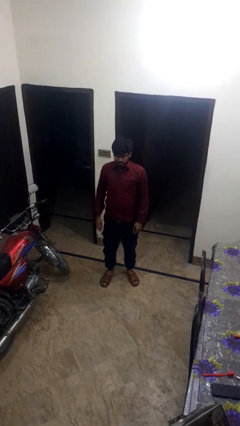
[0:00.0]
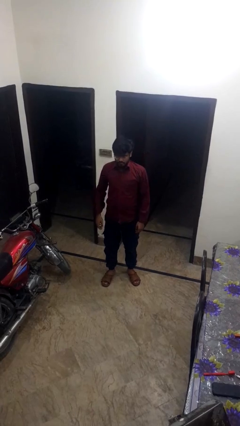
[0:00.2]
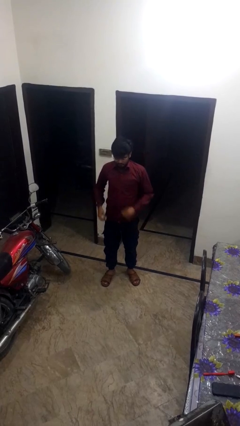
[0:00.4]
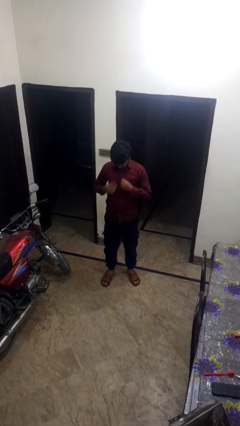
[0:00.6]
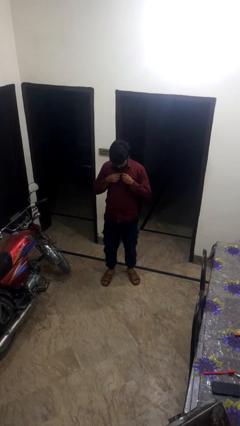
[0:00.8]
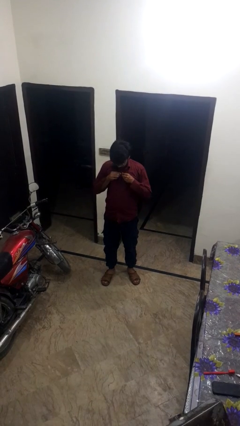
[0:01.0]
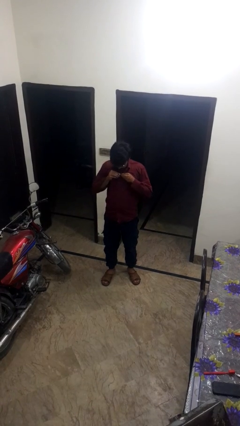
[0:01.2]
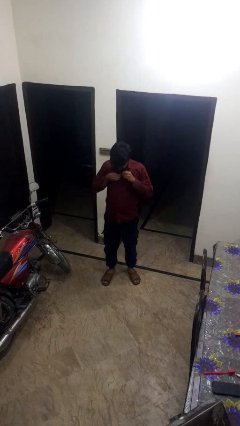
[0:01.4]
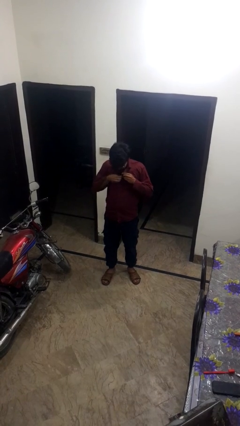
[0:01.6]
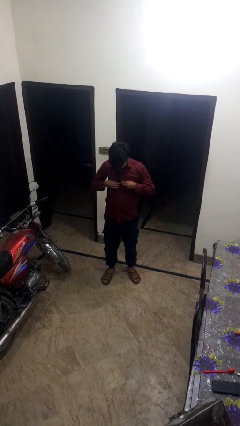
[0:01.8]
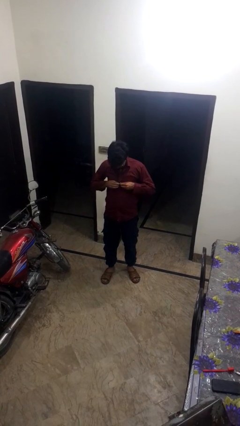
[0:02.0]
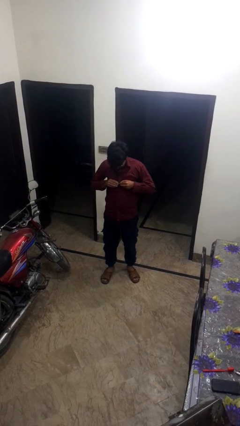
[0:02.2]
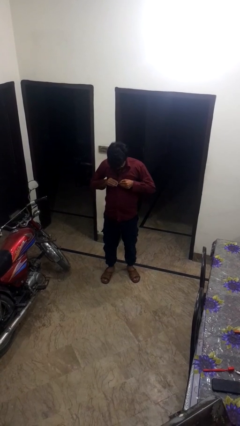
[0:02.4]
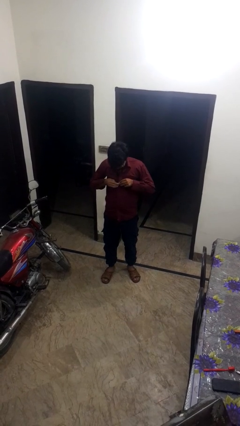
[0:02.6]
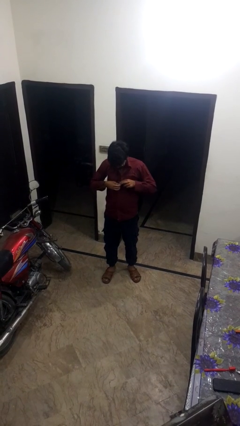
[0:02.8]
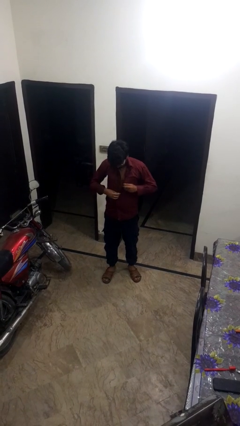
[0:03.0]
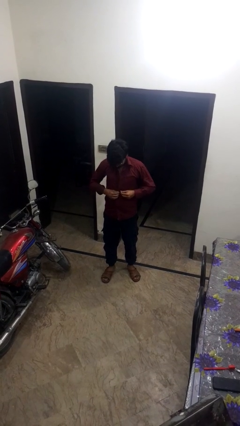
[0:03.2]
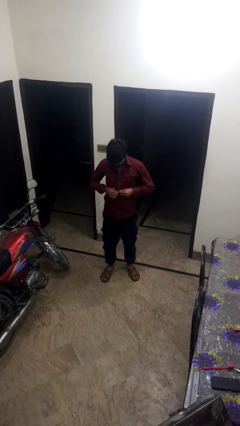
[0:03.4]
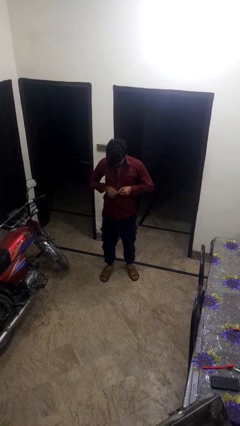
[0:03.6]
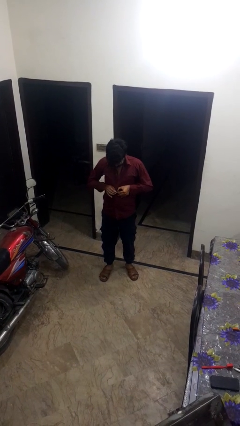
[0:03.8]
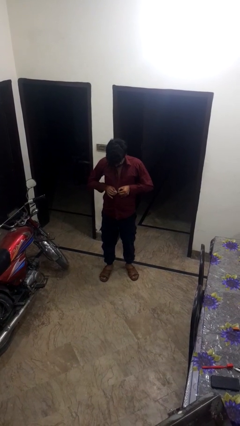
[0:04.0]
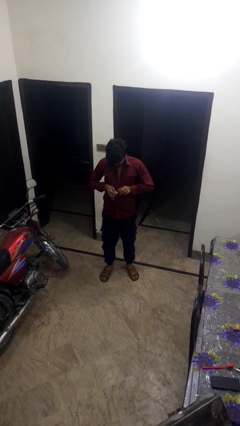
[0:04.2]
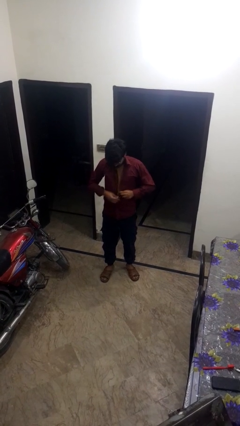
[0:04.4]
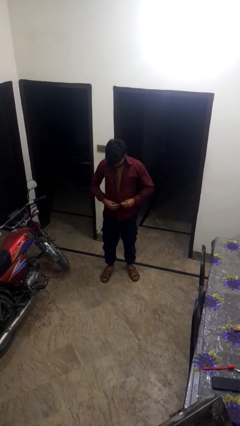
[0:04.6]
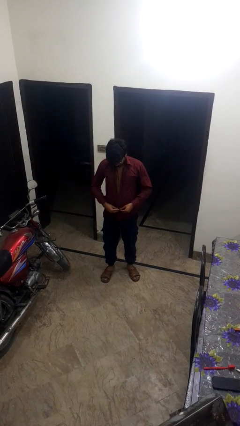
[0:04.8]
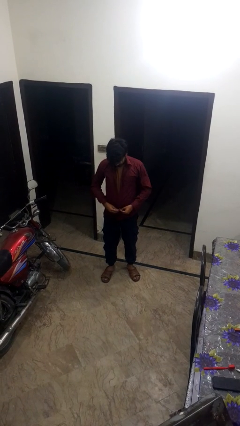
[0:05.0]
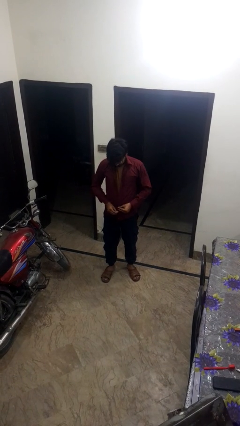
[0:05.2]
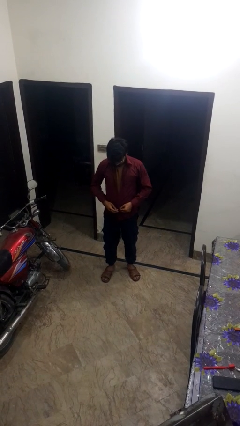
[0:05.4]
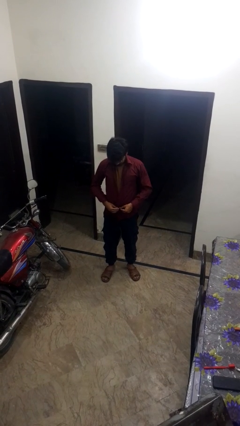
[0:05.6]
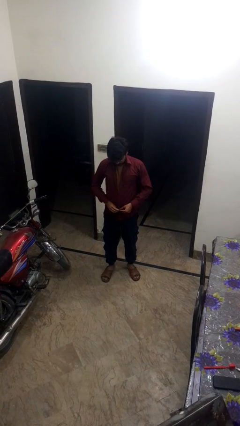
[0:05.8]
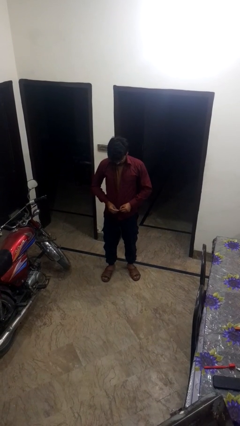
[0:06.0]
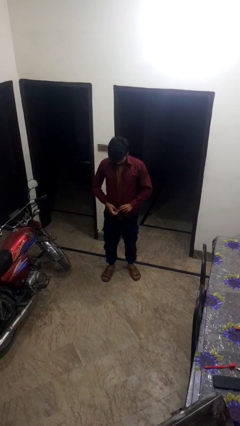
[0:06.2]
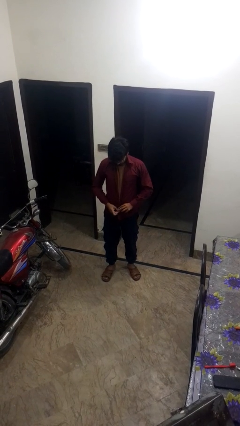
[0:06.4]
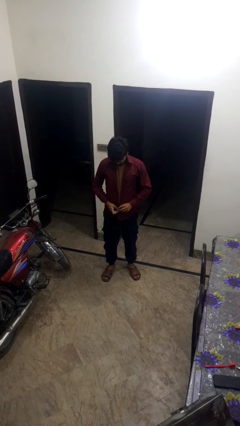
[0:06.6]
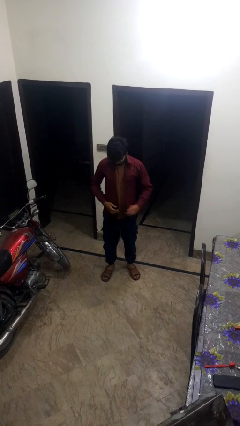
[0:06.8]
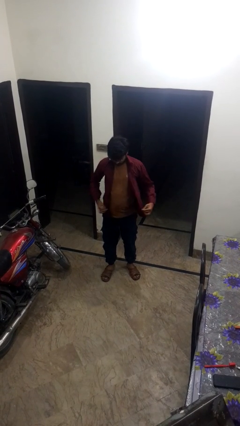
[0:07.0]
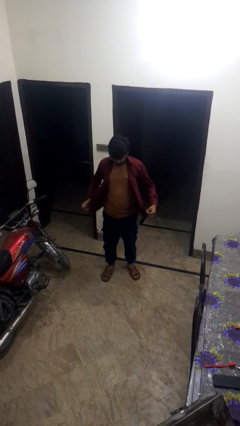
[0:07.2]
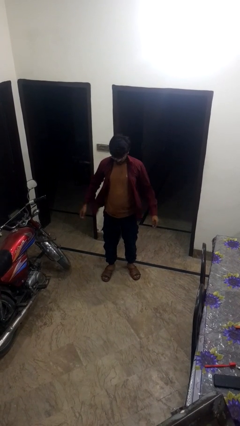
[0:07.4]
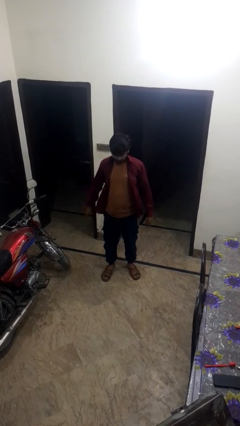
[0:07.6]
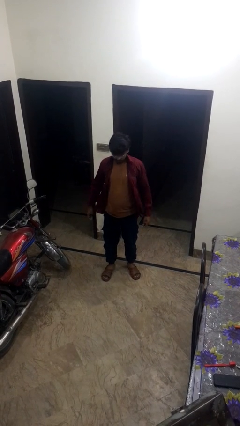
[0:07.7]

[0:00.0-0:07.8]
person unbuttons shirt

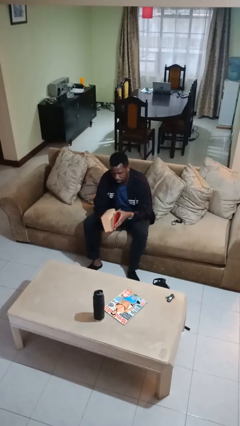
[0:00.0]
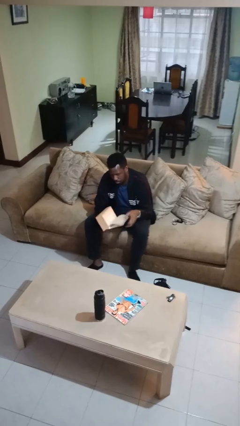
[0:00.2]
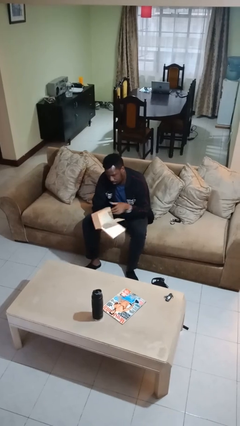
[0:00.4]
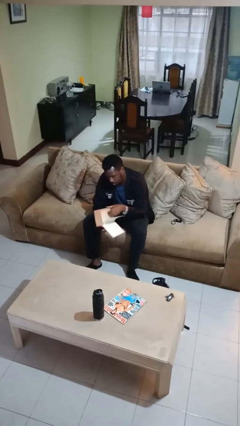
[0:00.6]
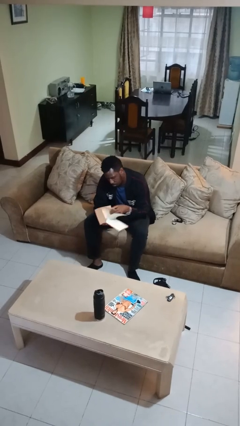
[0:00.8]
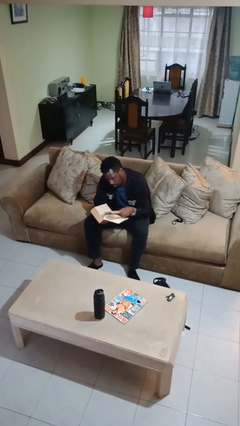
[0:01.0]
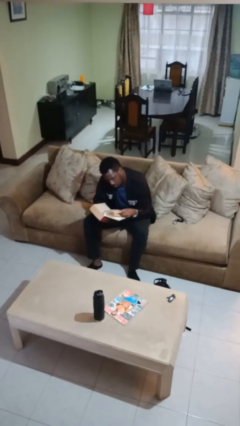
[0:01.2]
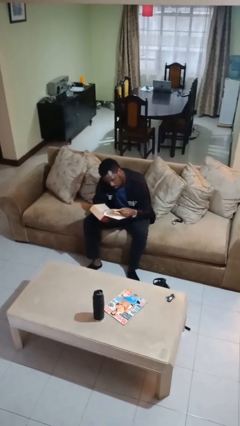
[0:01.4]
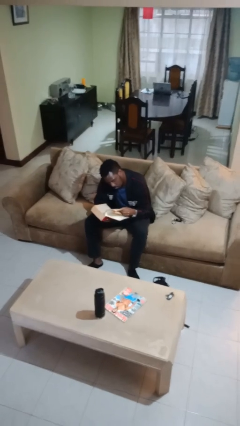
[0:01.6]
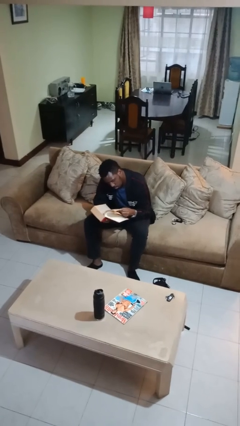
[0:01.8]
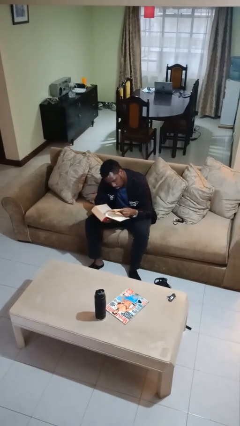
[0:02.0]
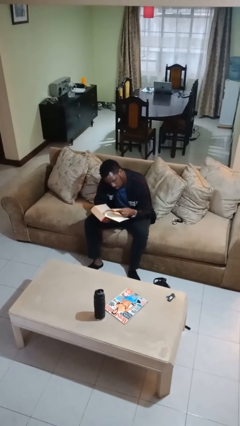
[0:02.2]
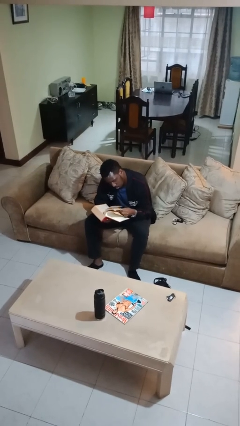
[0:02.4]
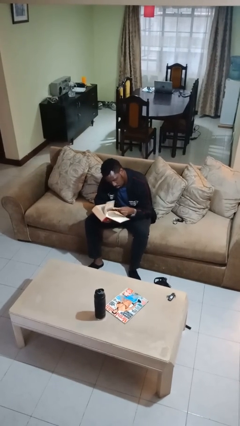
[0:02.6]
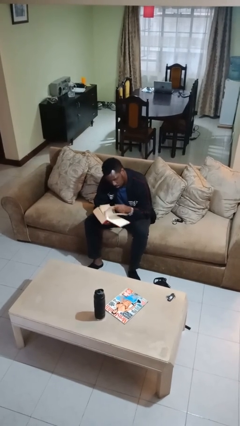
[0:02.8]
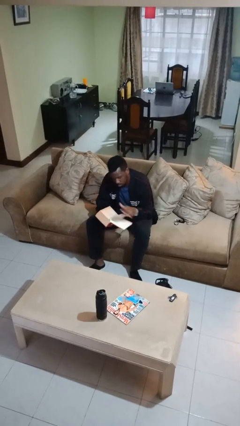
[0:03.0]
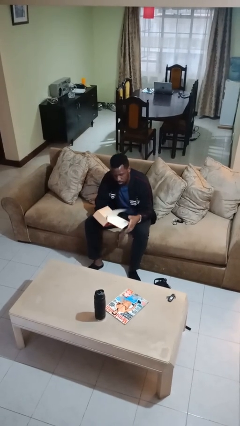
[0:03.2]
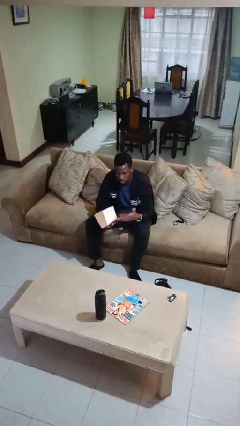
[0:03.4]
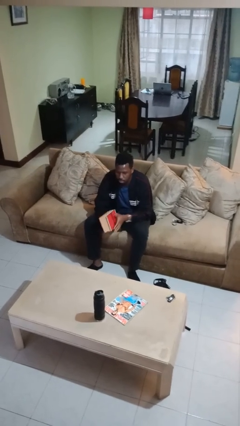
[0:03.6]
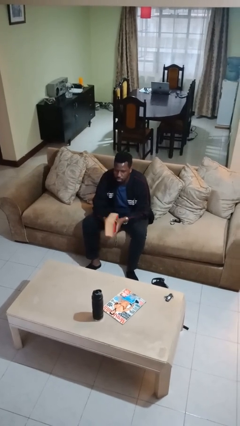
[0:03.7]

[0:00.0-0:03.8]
person reads book

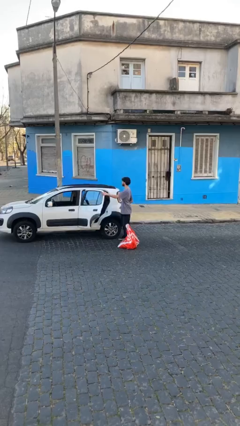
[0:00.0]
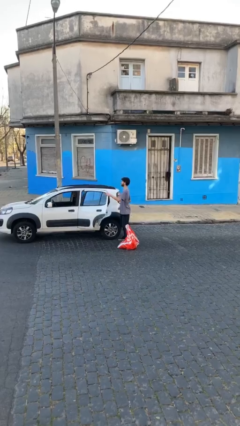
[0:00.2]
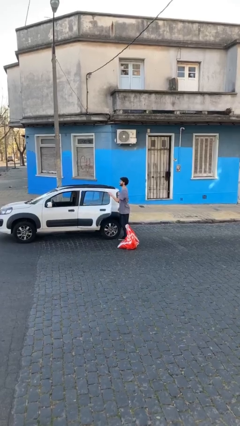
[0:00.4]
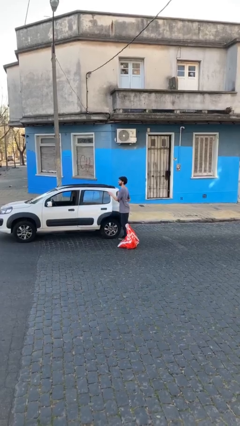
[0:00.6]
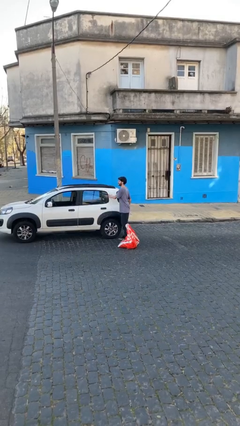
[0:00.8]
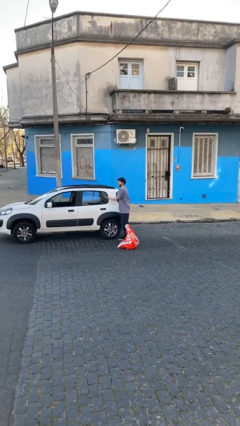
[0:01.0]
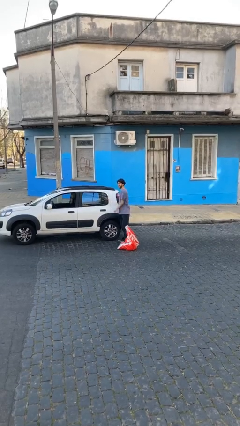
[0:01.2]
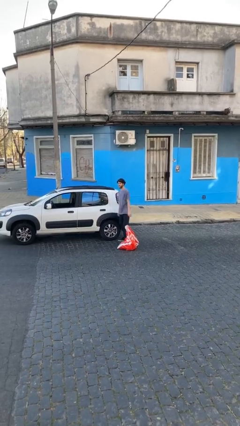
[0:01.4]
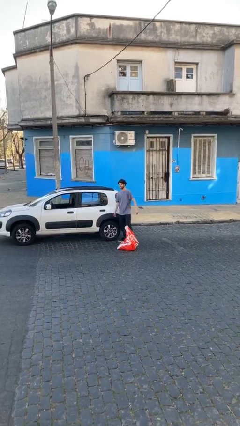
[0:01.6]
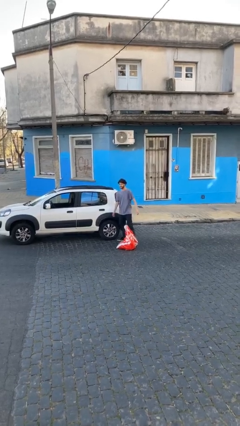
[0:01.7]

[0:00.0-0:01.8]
person closes car door

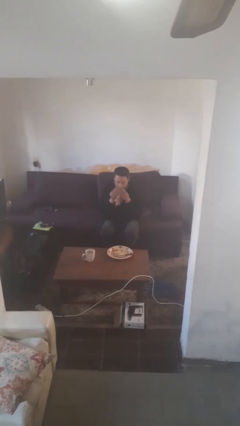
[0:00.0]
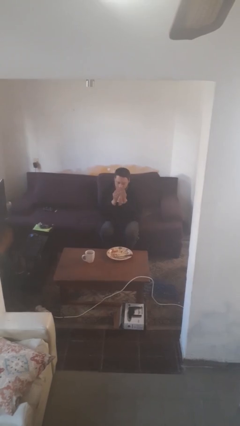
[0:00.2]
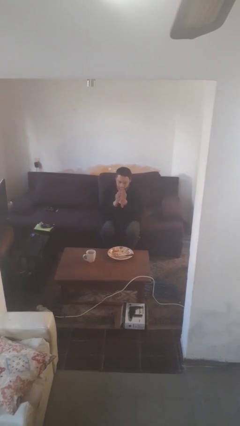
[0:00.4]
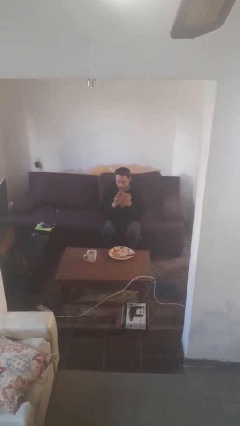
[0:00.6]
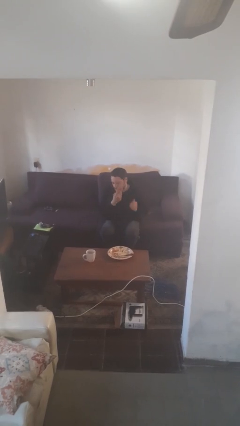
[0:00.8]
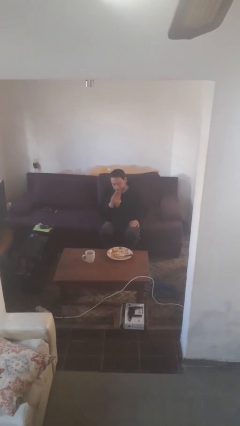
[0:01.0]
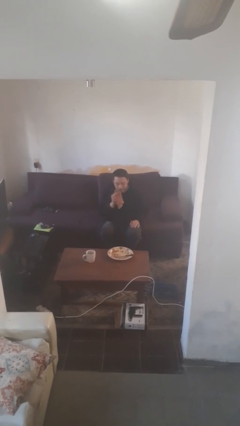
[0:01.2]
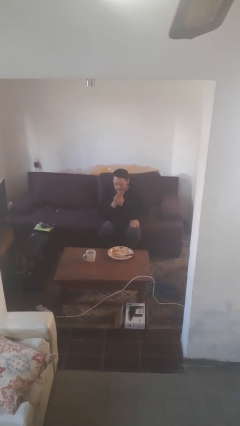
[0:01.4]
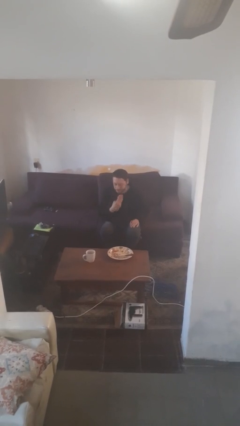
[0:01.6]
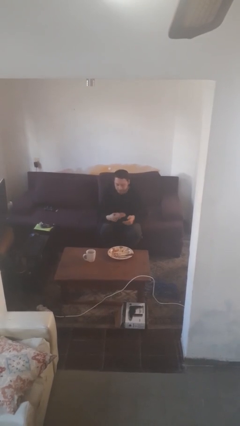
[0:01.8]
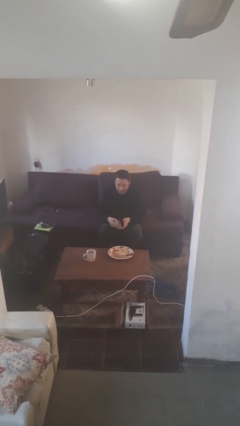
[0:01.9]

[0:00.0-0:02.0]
person wipes mouth with napkin

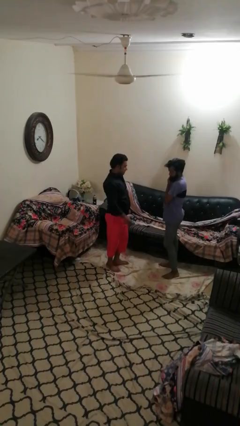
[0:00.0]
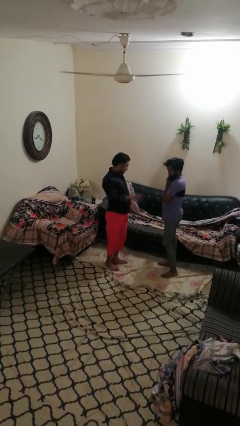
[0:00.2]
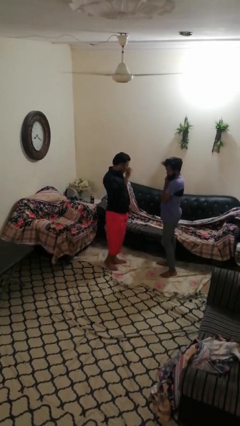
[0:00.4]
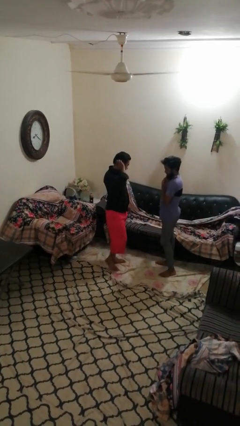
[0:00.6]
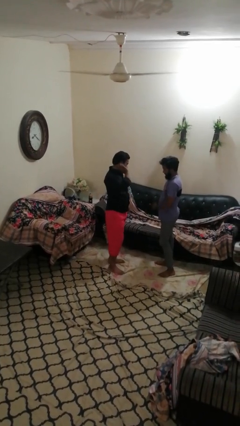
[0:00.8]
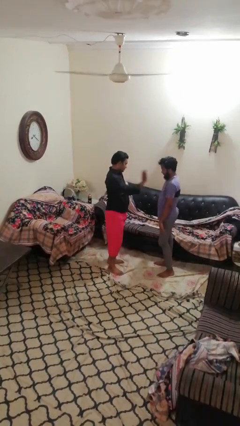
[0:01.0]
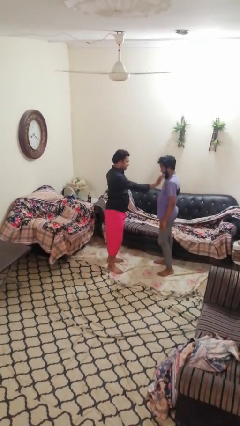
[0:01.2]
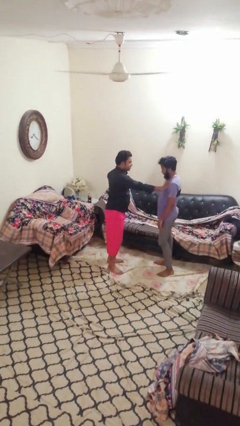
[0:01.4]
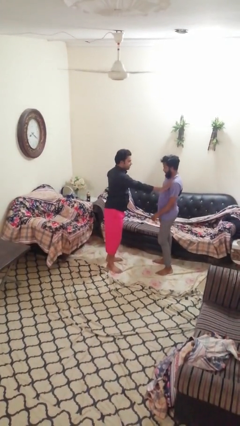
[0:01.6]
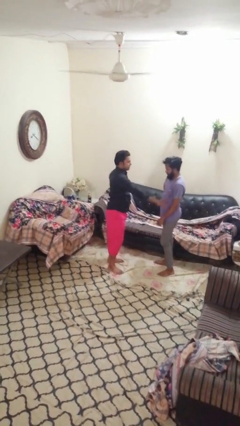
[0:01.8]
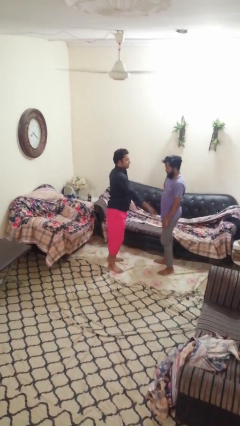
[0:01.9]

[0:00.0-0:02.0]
person shoves person

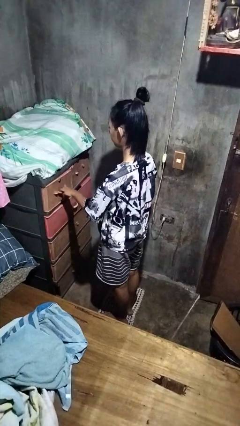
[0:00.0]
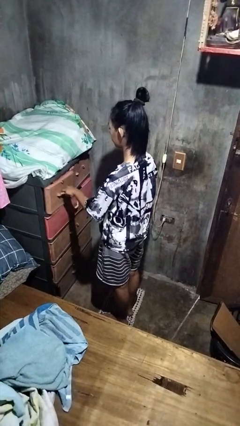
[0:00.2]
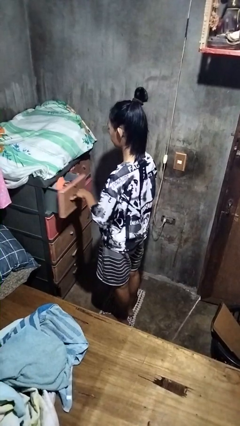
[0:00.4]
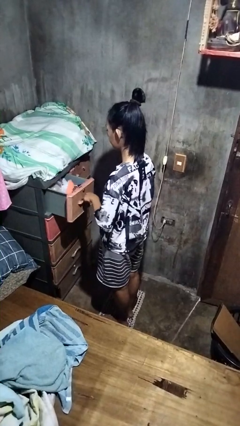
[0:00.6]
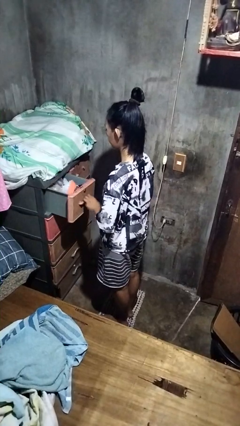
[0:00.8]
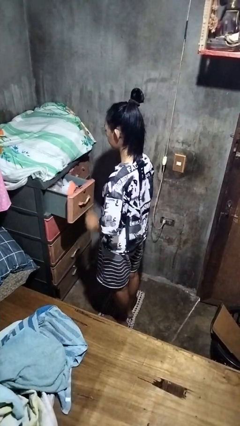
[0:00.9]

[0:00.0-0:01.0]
person opens dresser drawer
